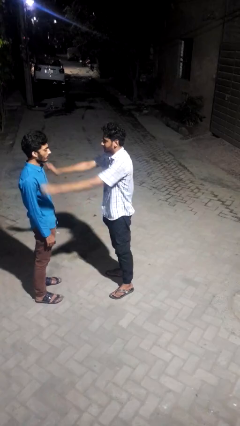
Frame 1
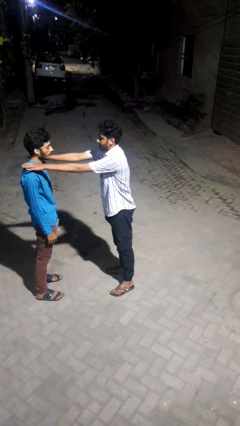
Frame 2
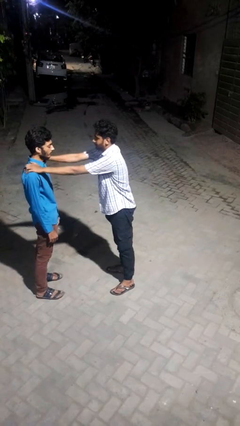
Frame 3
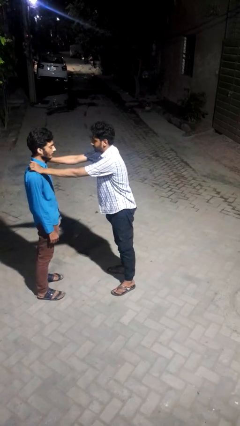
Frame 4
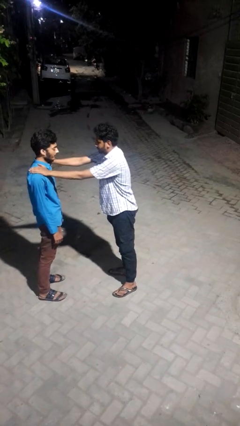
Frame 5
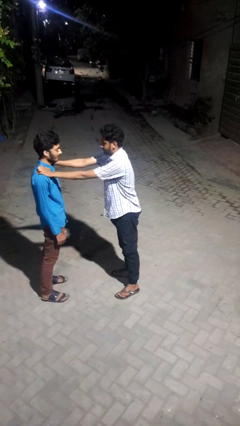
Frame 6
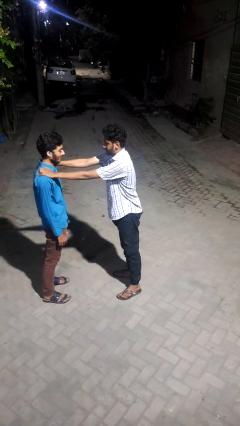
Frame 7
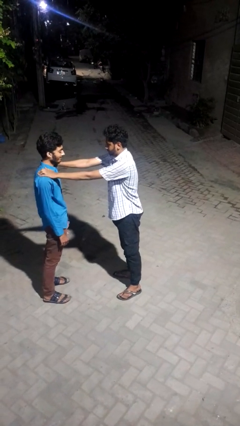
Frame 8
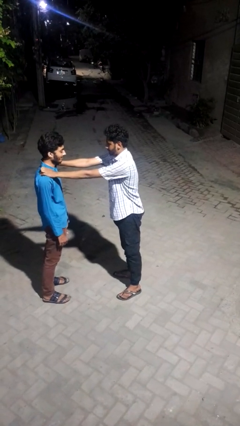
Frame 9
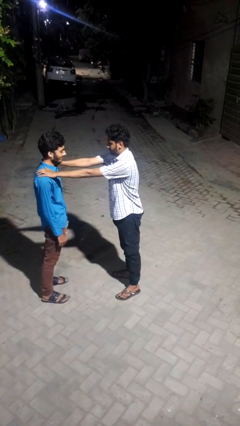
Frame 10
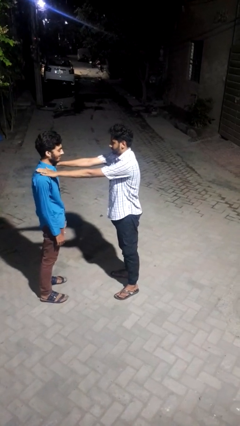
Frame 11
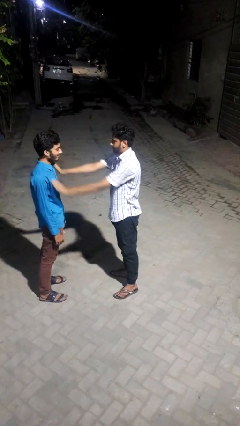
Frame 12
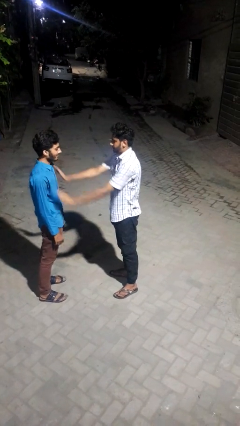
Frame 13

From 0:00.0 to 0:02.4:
person pounds shoulders of person

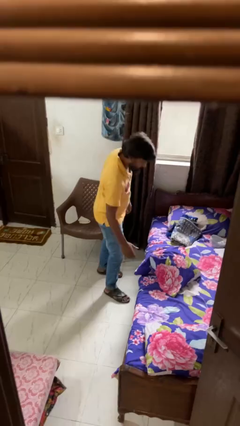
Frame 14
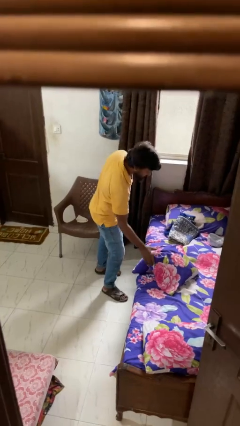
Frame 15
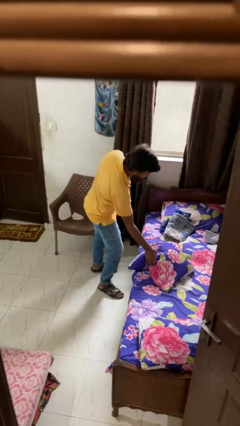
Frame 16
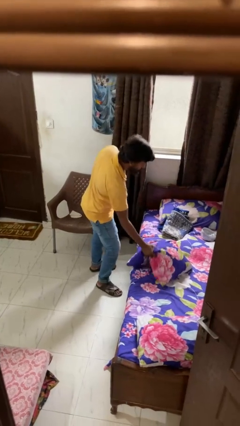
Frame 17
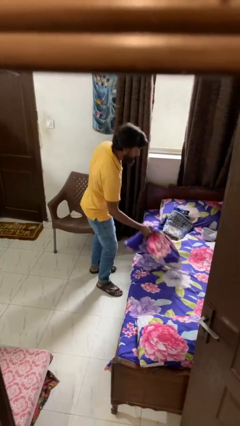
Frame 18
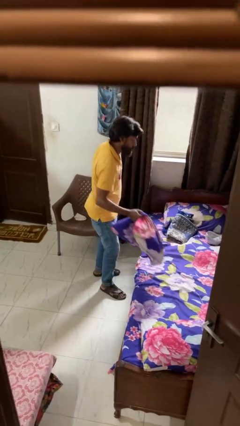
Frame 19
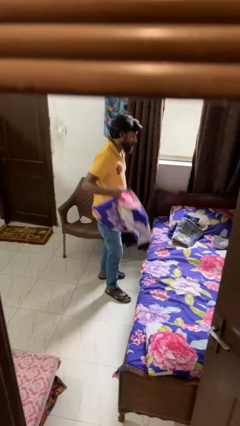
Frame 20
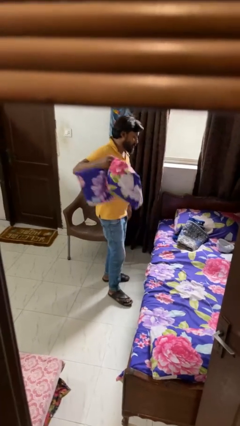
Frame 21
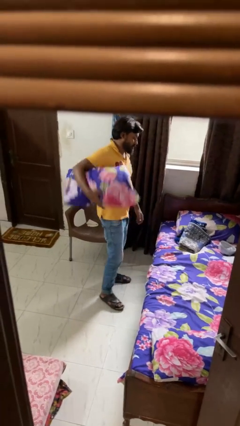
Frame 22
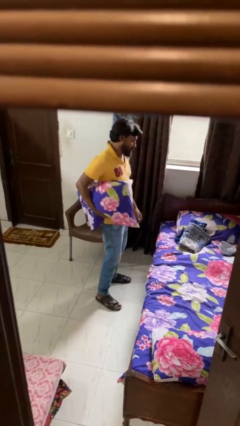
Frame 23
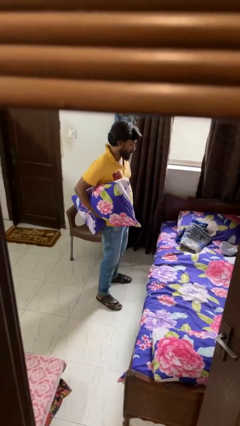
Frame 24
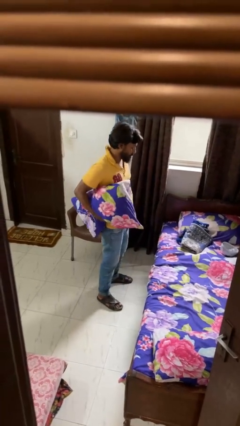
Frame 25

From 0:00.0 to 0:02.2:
person picks up object from bed

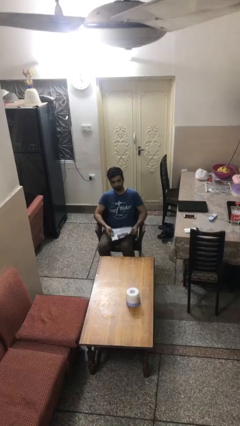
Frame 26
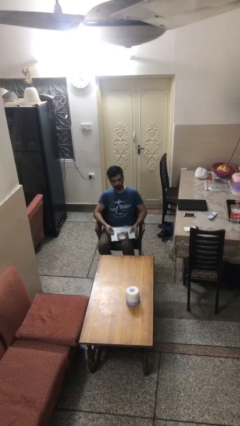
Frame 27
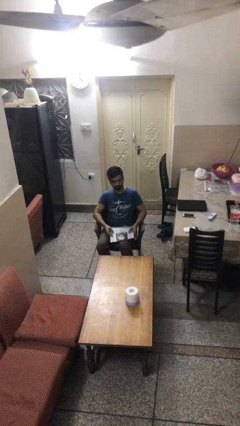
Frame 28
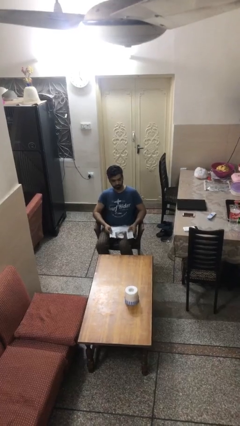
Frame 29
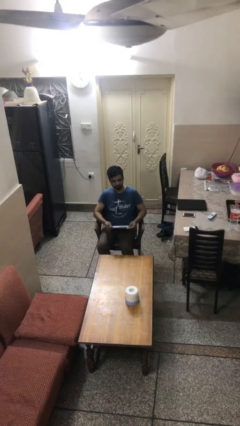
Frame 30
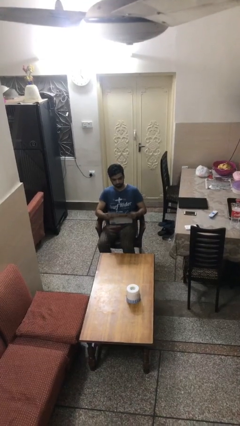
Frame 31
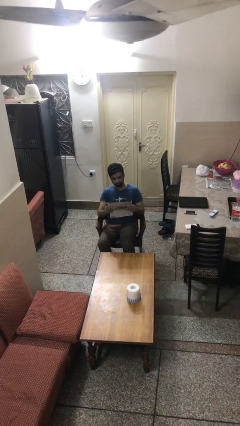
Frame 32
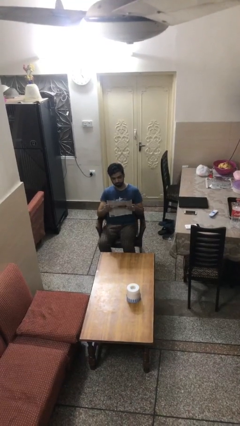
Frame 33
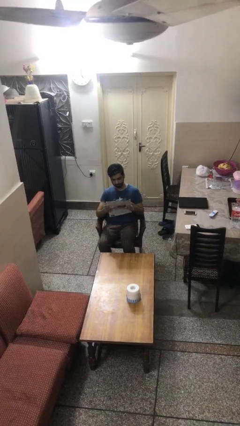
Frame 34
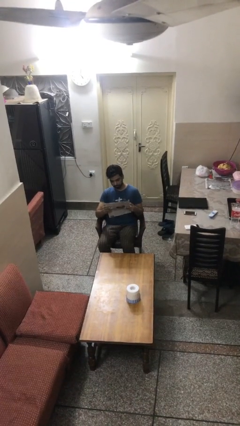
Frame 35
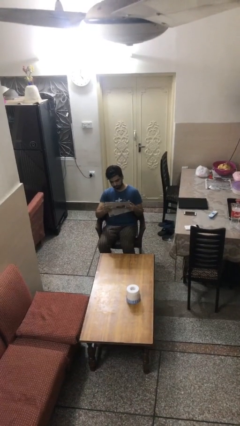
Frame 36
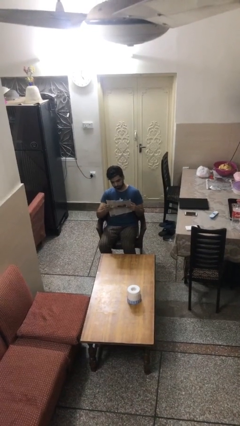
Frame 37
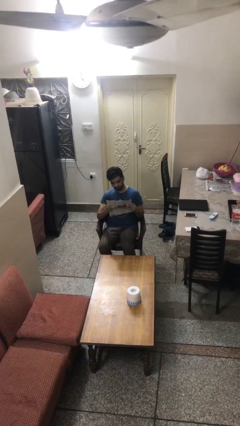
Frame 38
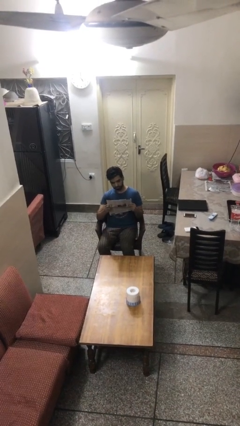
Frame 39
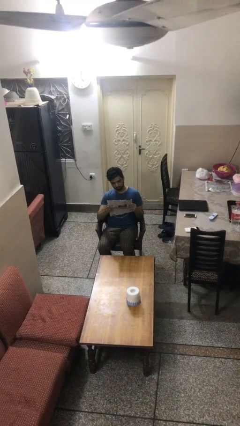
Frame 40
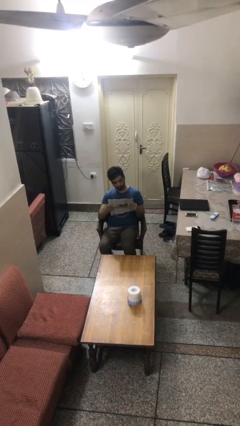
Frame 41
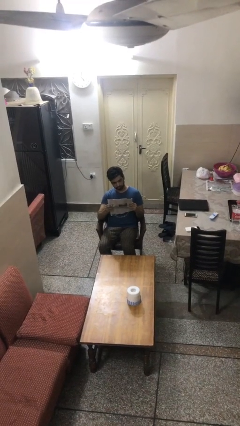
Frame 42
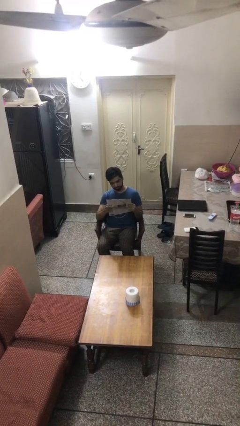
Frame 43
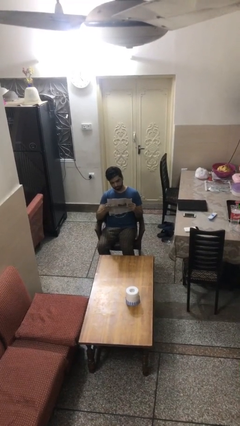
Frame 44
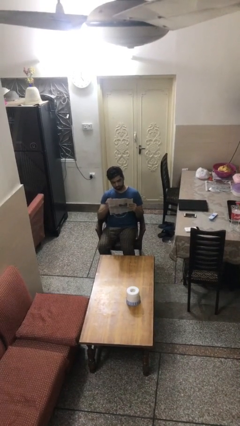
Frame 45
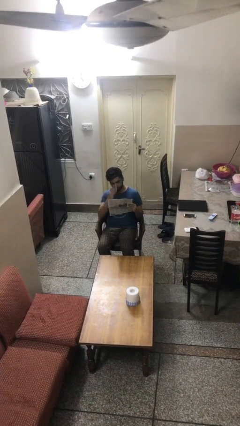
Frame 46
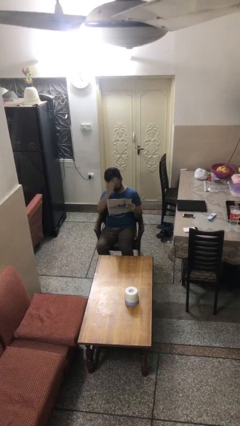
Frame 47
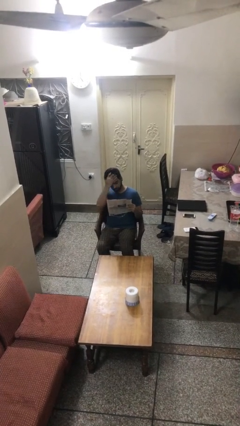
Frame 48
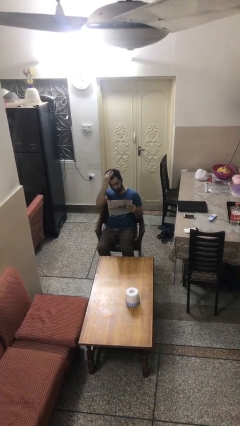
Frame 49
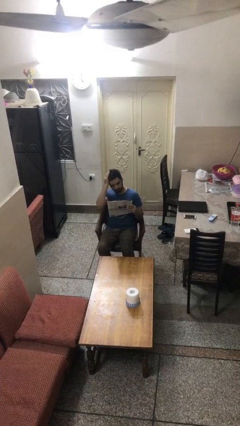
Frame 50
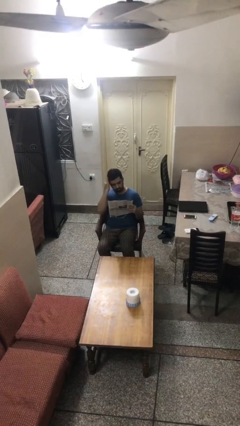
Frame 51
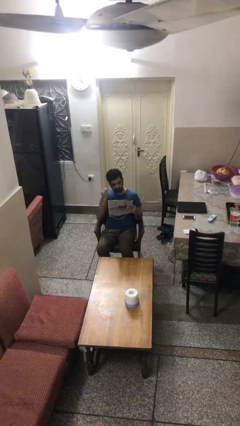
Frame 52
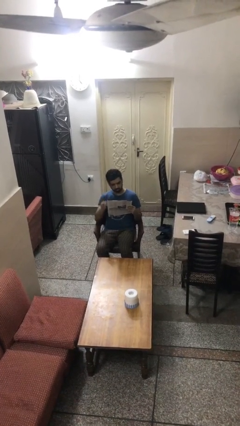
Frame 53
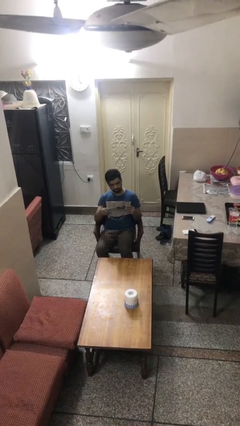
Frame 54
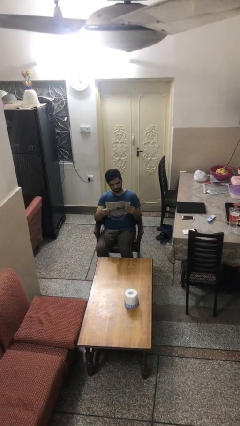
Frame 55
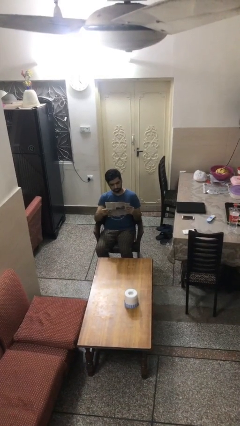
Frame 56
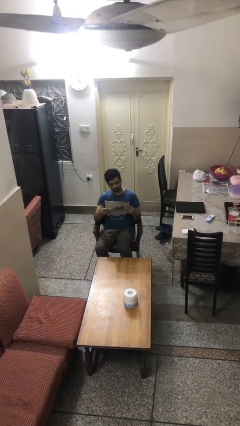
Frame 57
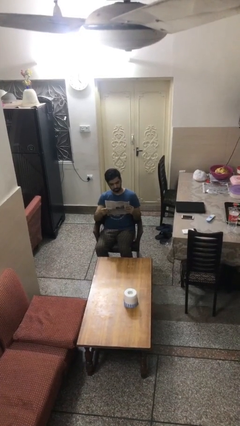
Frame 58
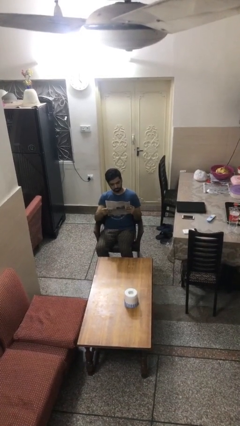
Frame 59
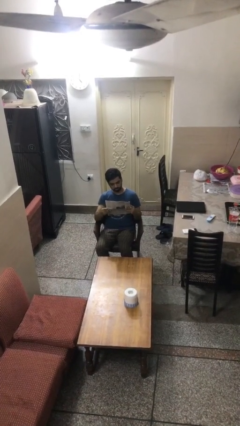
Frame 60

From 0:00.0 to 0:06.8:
person reads document

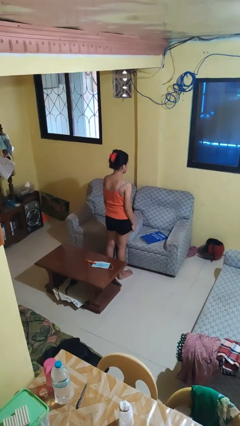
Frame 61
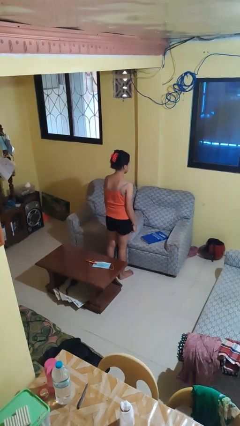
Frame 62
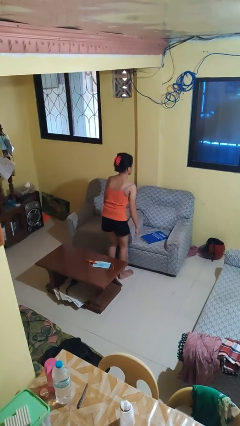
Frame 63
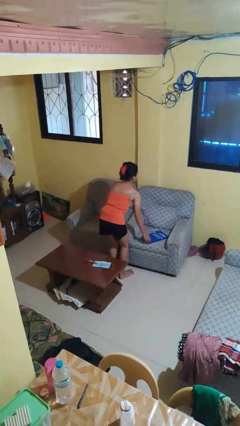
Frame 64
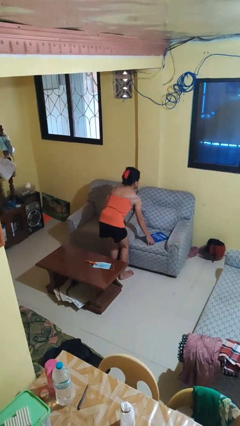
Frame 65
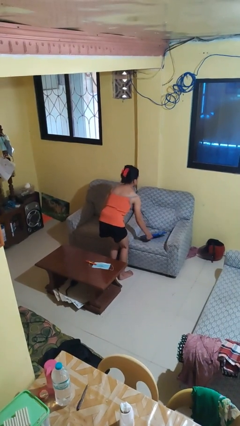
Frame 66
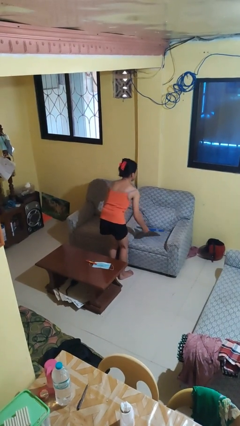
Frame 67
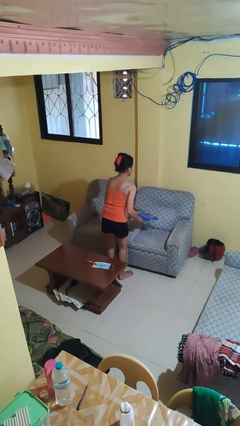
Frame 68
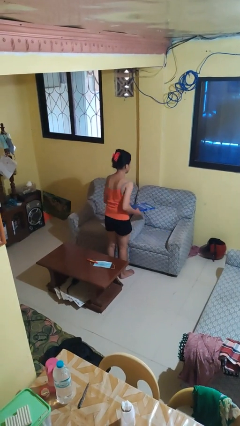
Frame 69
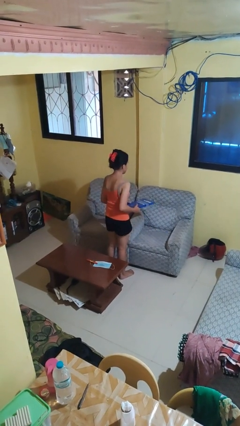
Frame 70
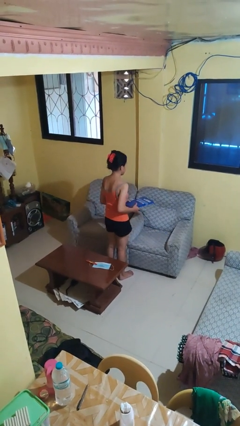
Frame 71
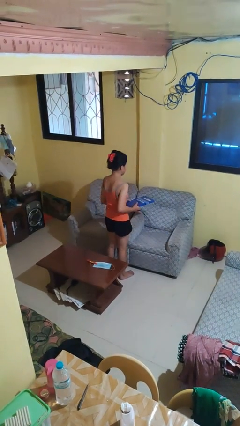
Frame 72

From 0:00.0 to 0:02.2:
person picks up object from couch

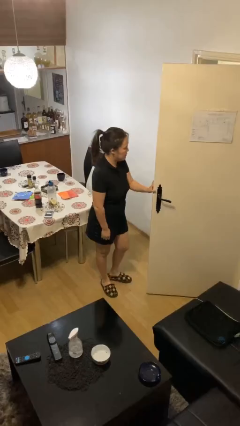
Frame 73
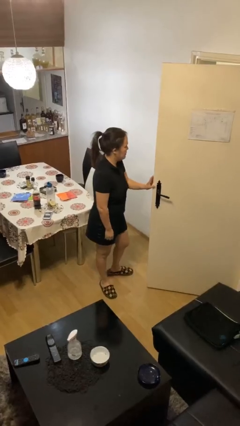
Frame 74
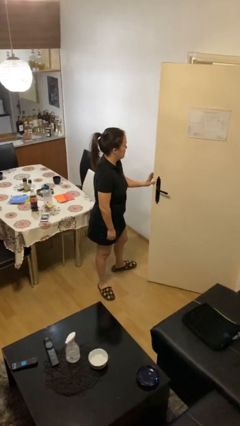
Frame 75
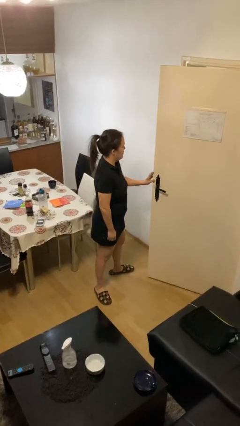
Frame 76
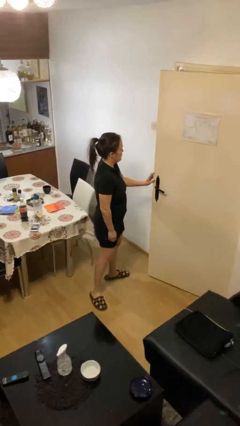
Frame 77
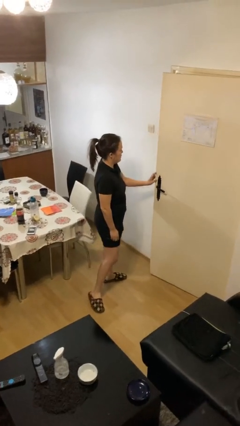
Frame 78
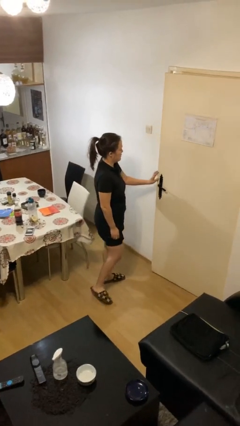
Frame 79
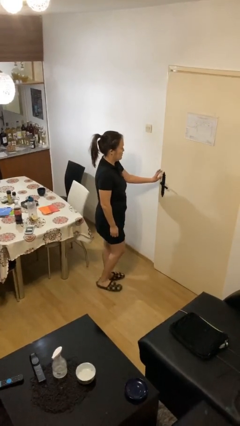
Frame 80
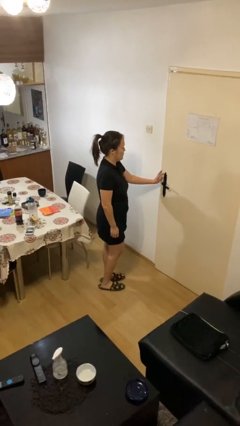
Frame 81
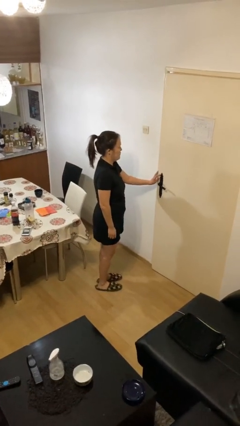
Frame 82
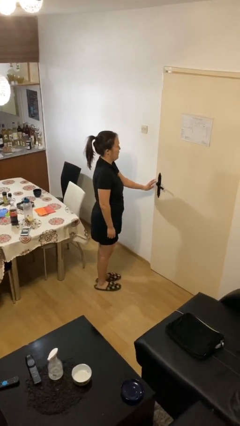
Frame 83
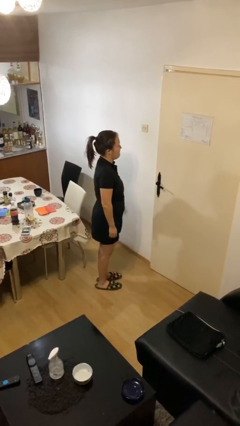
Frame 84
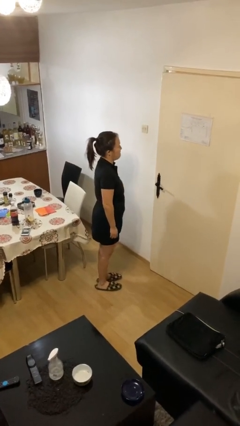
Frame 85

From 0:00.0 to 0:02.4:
person closes facility door

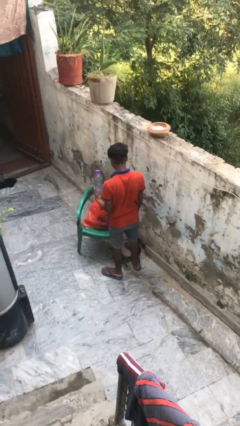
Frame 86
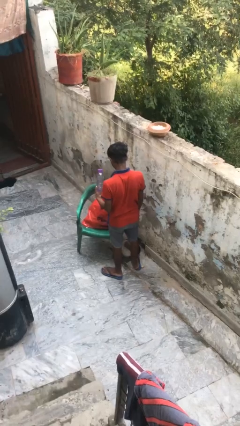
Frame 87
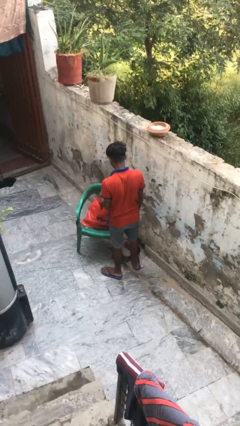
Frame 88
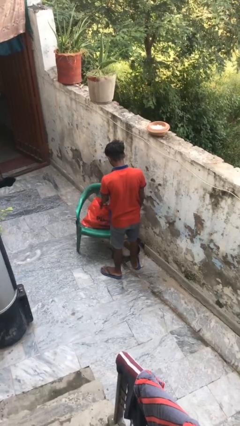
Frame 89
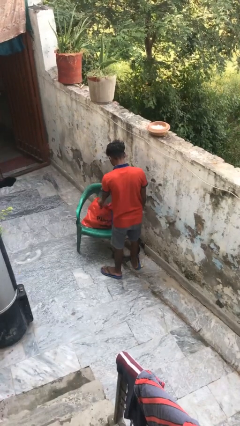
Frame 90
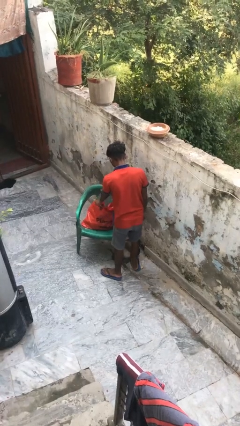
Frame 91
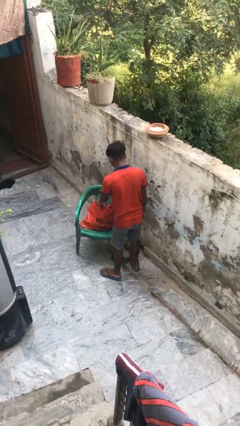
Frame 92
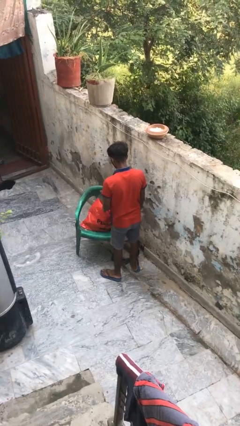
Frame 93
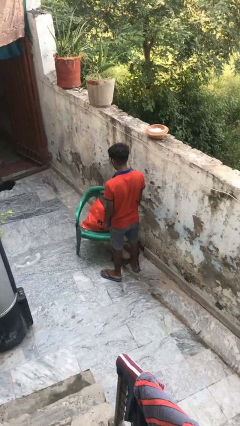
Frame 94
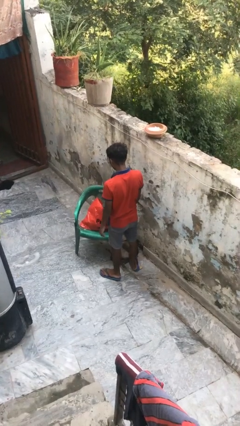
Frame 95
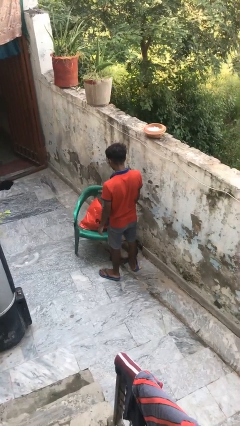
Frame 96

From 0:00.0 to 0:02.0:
person puts object into bag
